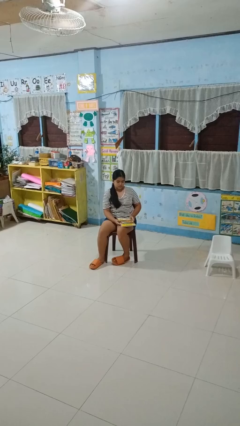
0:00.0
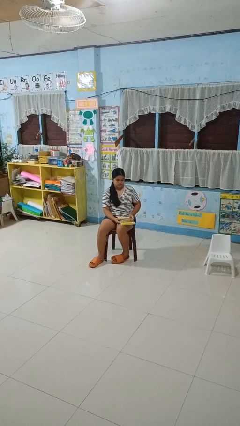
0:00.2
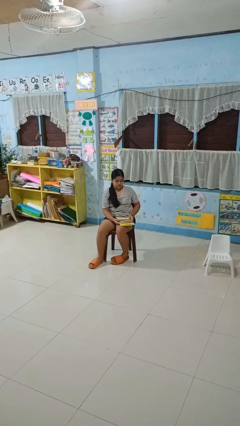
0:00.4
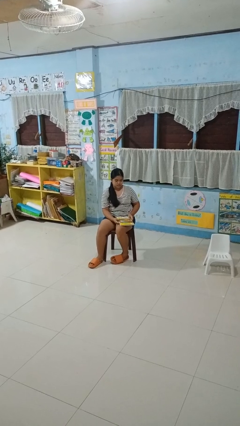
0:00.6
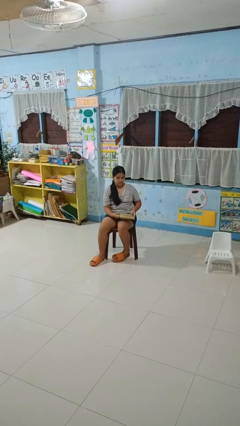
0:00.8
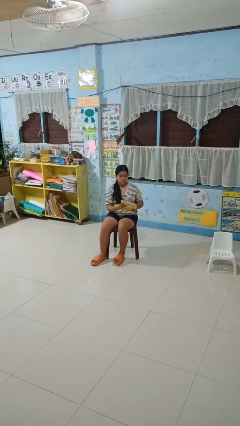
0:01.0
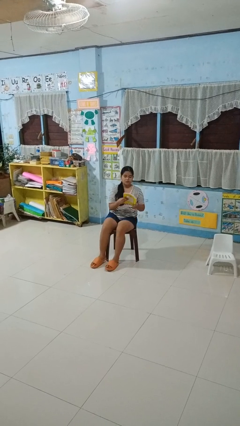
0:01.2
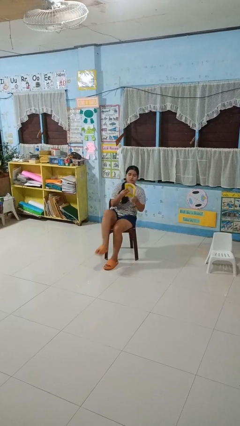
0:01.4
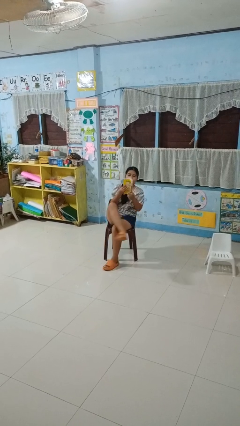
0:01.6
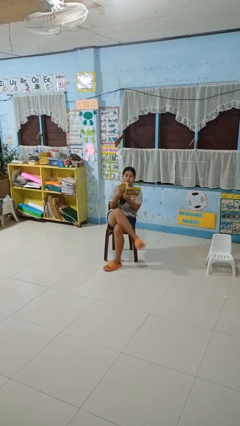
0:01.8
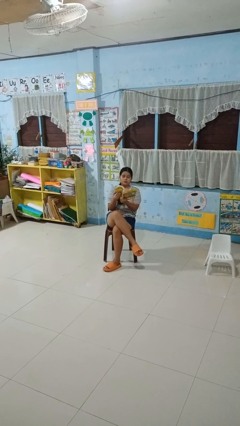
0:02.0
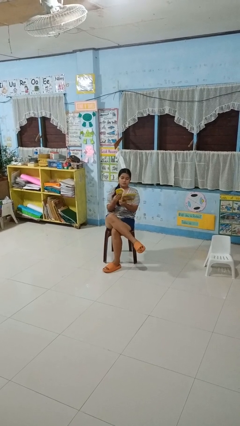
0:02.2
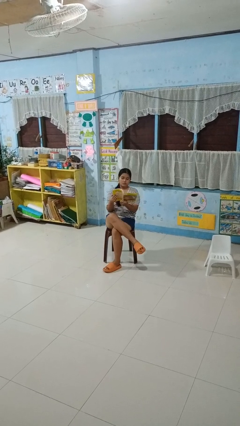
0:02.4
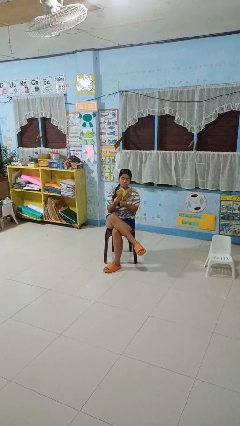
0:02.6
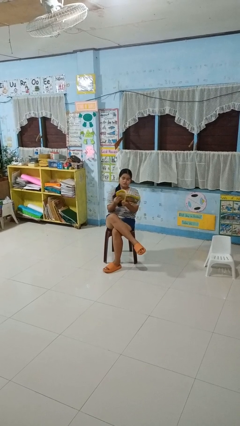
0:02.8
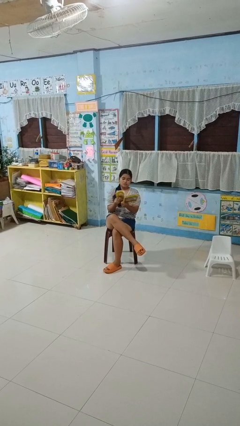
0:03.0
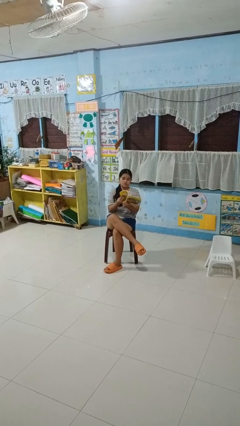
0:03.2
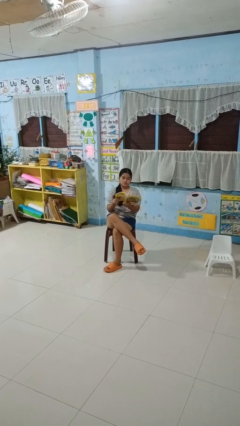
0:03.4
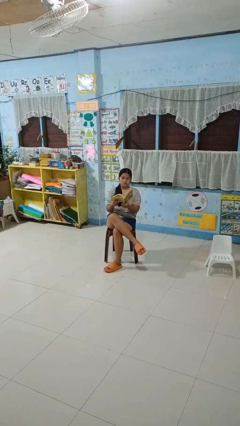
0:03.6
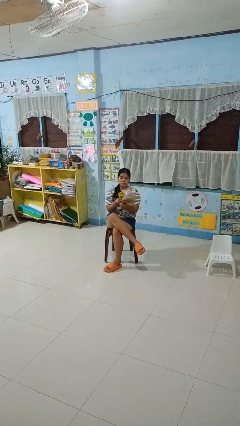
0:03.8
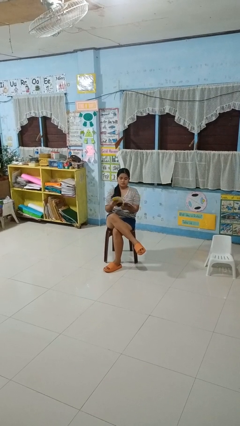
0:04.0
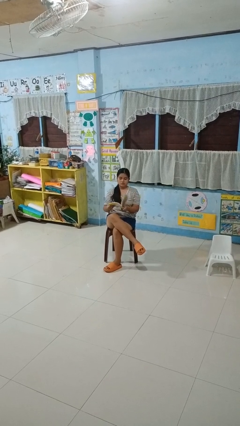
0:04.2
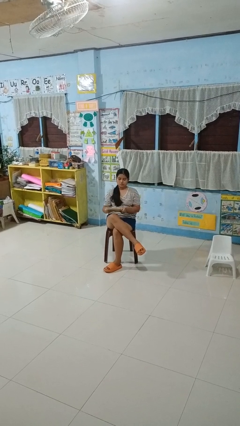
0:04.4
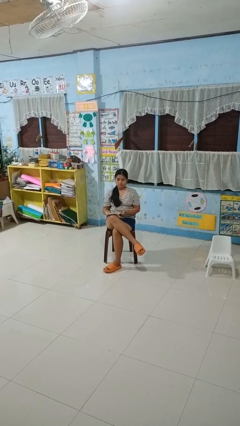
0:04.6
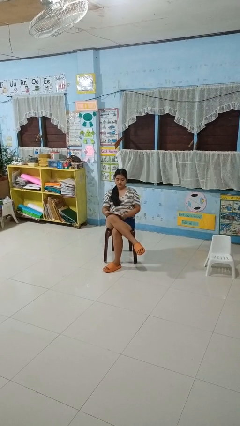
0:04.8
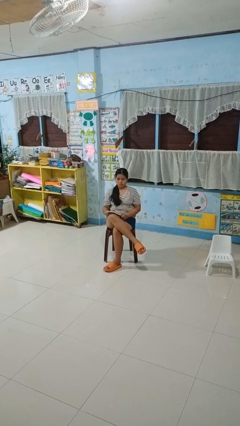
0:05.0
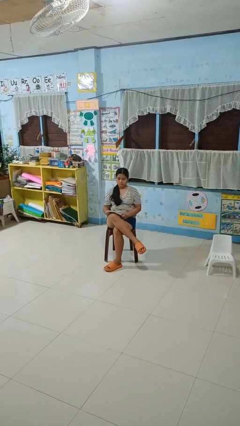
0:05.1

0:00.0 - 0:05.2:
person reads book

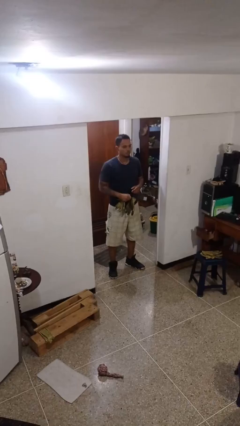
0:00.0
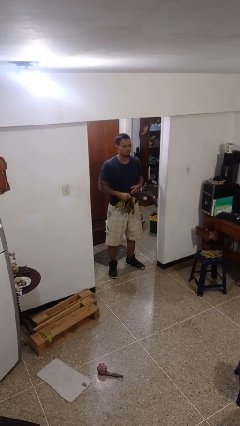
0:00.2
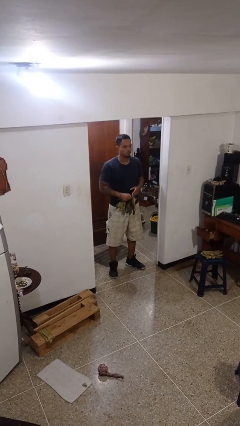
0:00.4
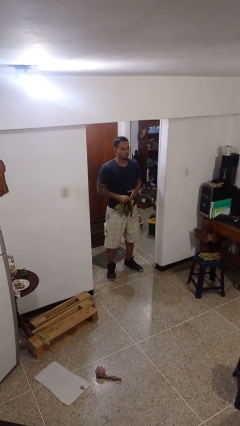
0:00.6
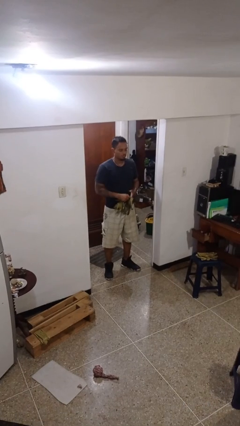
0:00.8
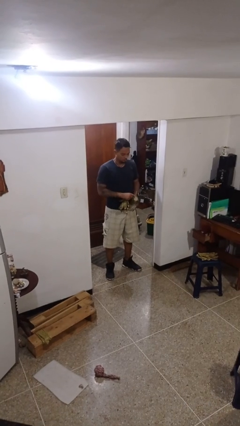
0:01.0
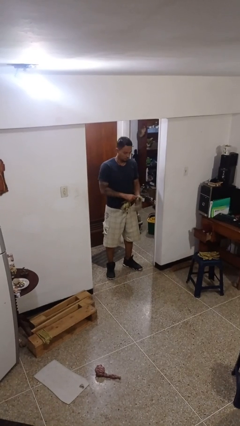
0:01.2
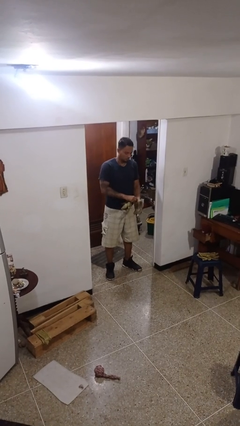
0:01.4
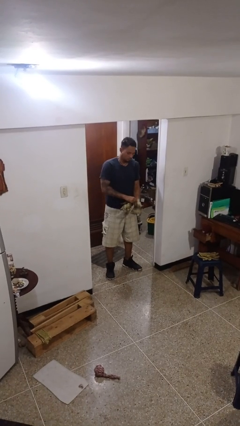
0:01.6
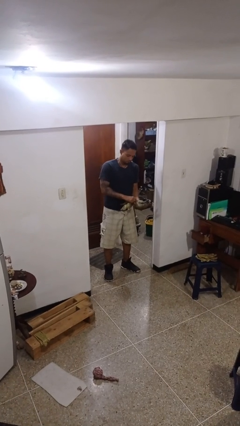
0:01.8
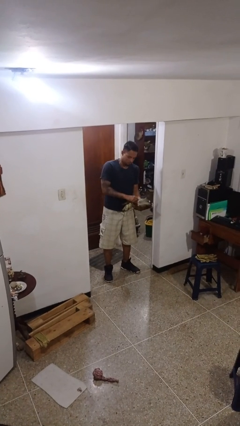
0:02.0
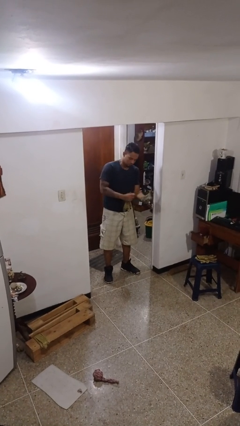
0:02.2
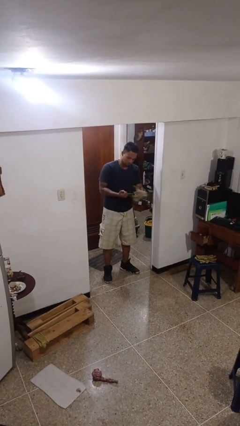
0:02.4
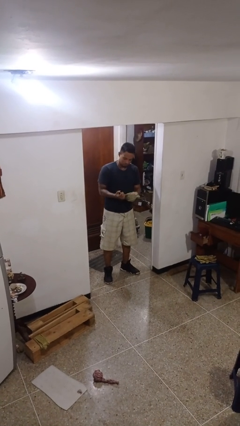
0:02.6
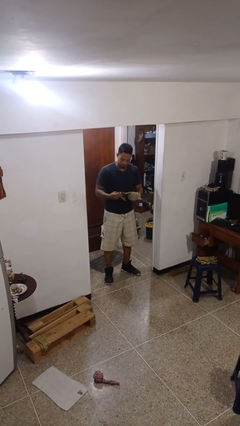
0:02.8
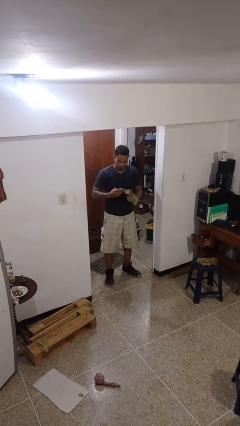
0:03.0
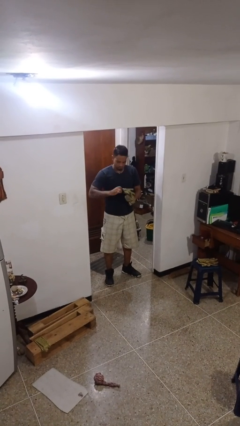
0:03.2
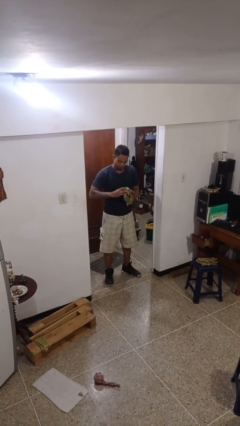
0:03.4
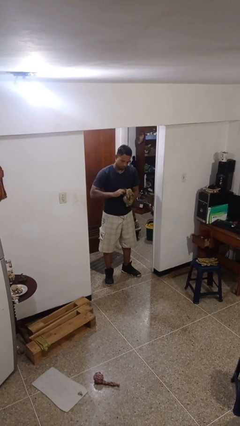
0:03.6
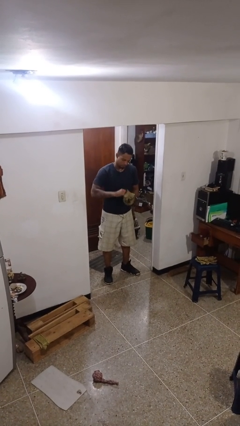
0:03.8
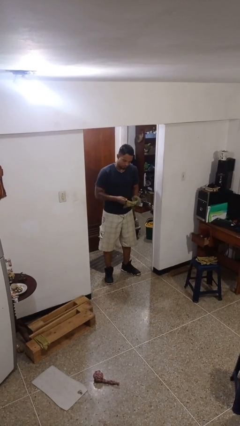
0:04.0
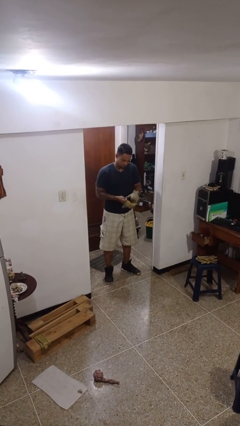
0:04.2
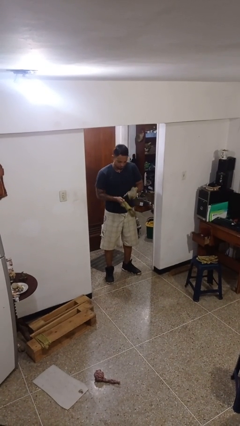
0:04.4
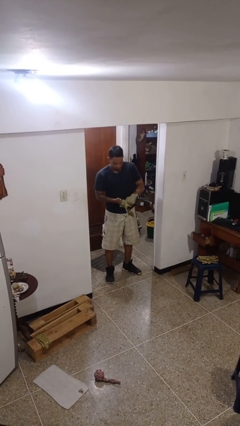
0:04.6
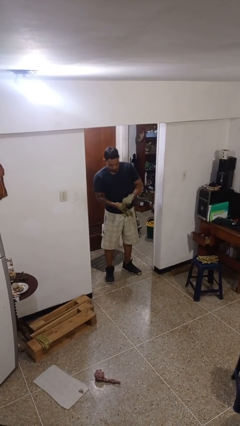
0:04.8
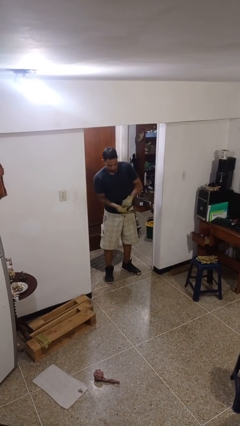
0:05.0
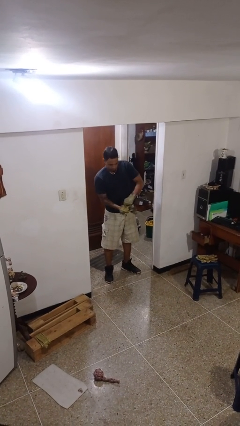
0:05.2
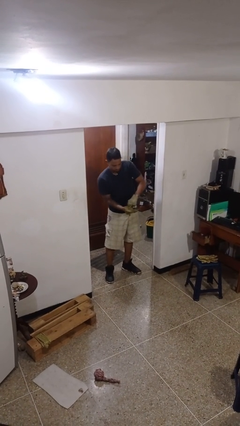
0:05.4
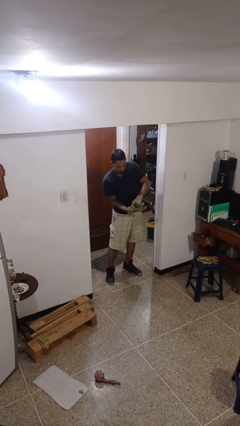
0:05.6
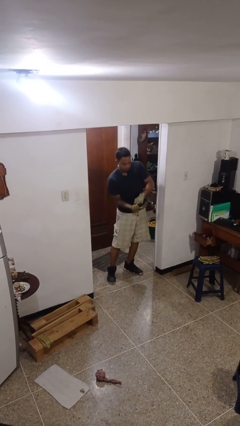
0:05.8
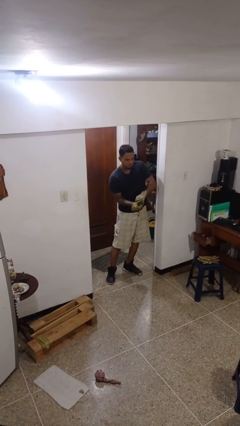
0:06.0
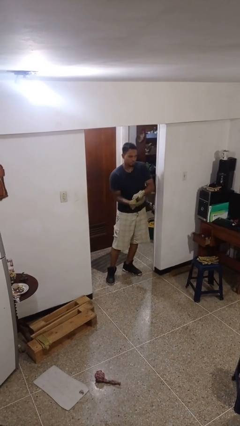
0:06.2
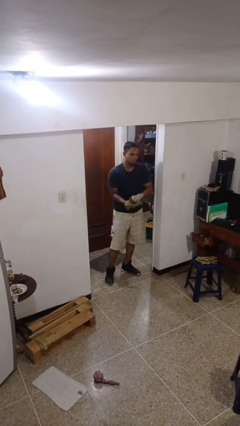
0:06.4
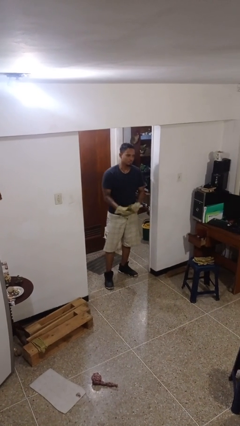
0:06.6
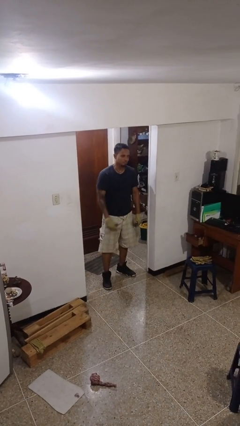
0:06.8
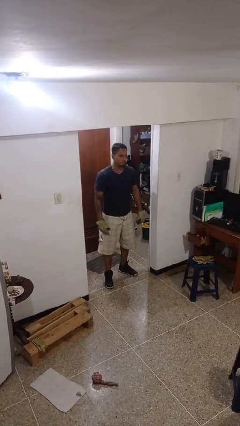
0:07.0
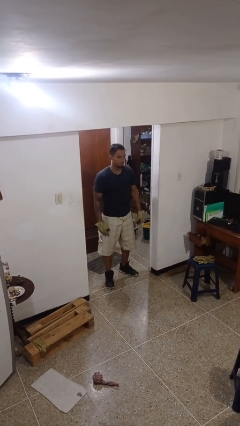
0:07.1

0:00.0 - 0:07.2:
person puts on gloves

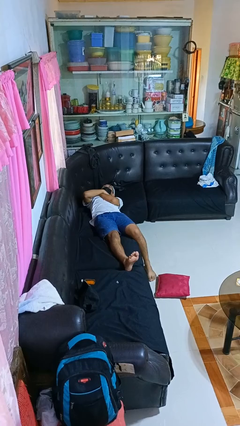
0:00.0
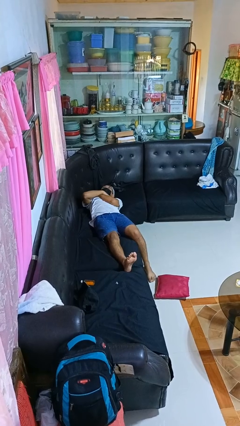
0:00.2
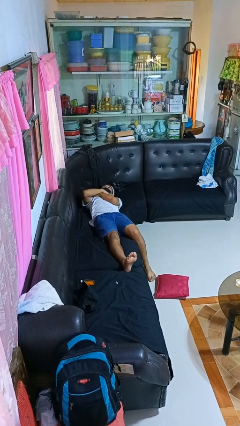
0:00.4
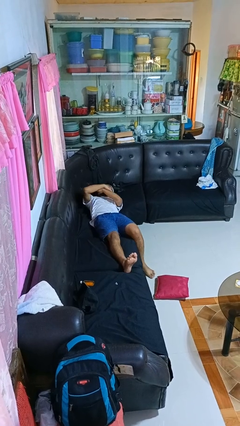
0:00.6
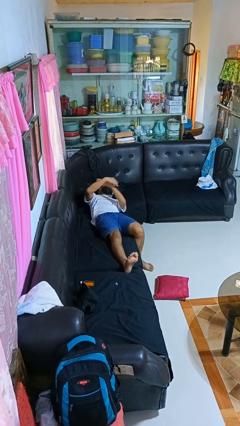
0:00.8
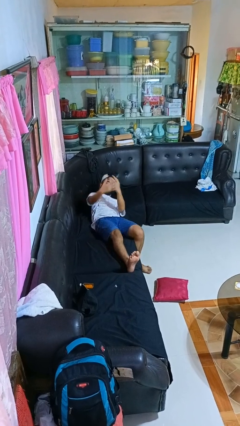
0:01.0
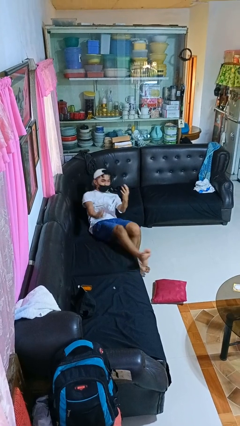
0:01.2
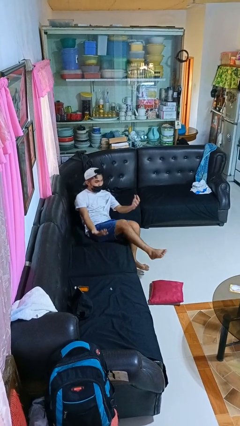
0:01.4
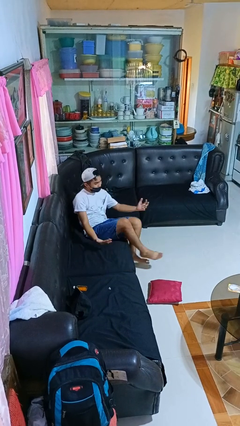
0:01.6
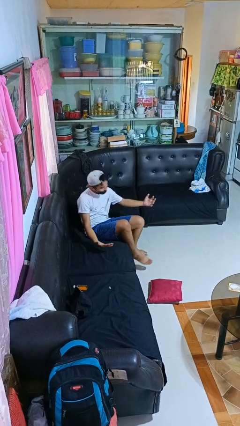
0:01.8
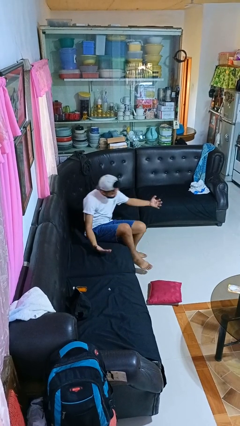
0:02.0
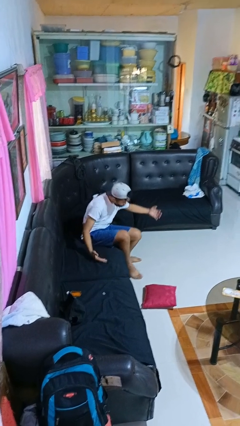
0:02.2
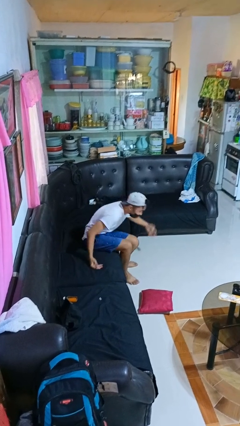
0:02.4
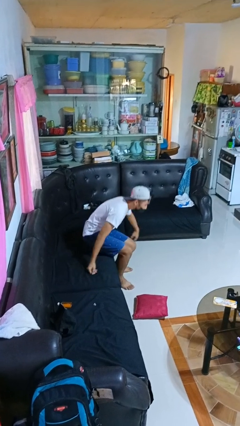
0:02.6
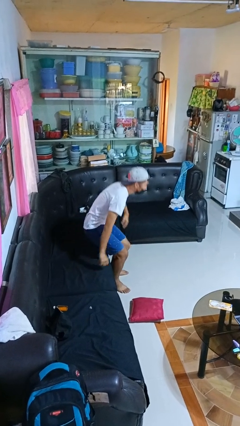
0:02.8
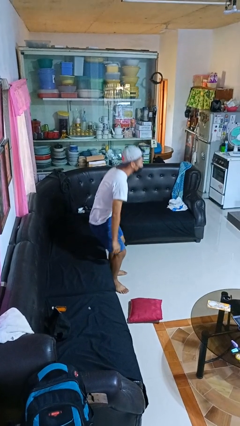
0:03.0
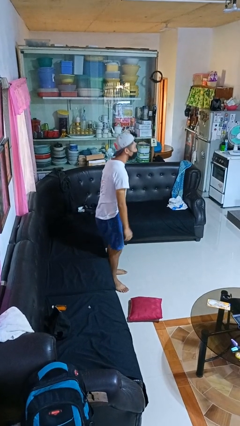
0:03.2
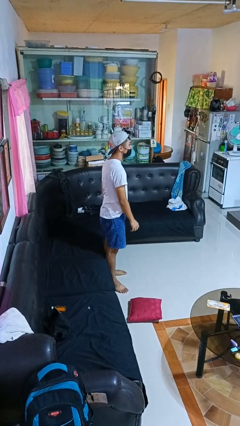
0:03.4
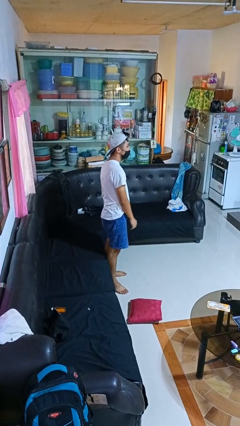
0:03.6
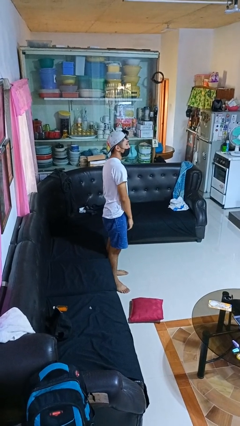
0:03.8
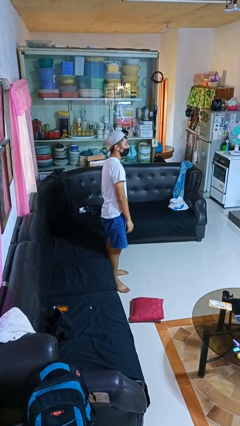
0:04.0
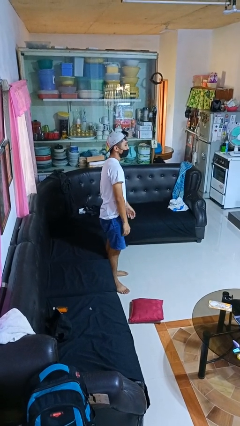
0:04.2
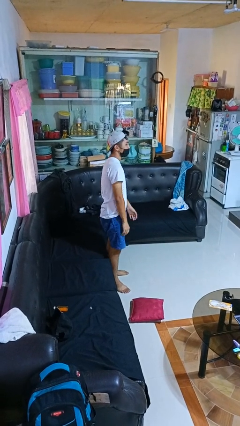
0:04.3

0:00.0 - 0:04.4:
person stands up

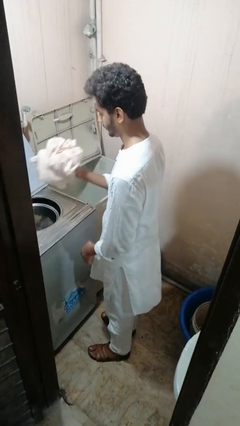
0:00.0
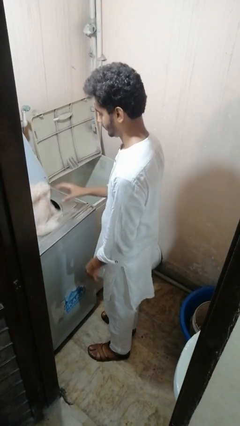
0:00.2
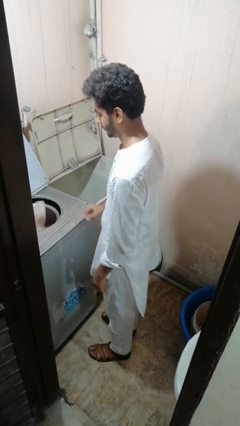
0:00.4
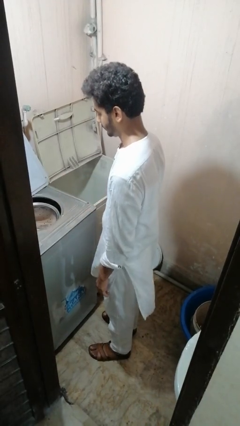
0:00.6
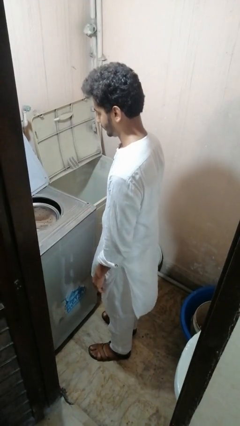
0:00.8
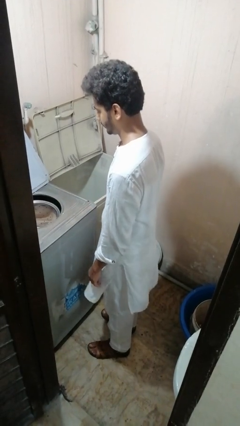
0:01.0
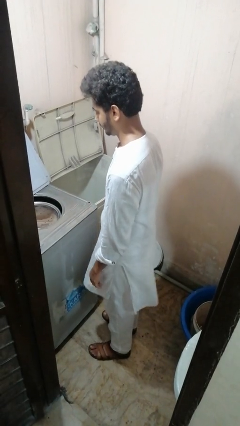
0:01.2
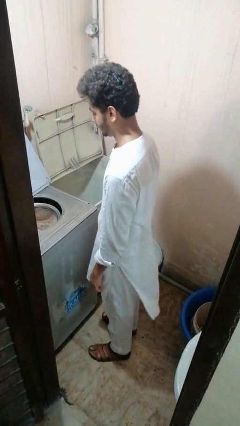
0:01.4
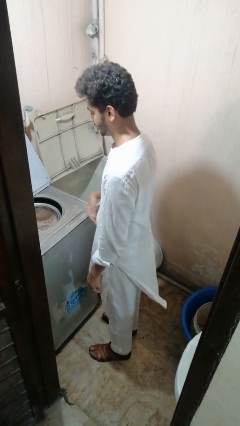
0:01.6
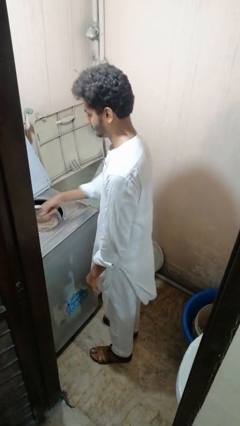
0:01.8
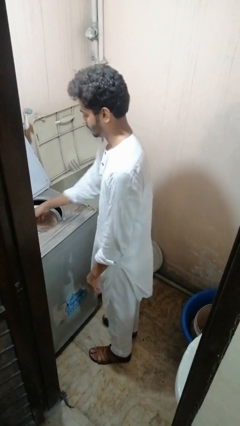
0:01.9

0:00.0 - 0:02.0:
person loads dryer
